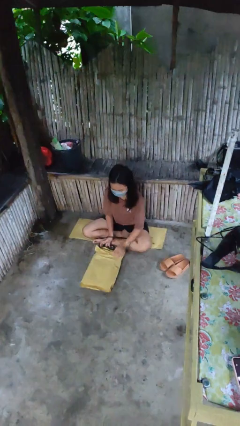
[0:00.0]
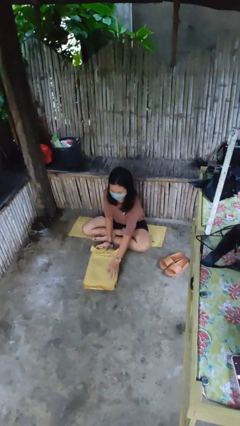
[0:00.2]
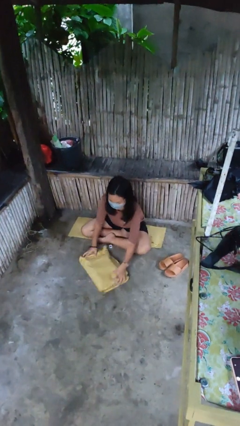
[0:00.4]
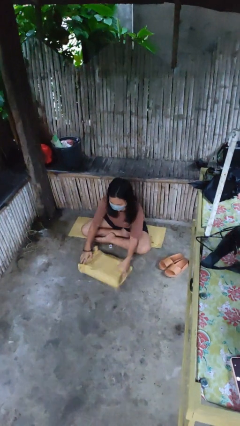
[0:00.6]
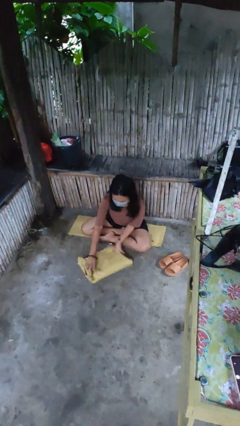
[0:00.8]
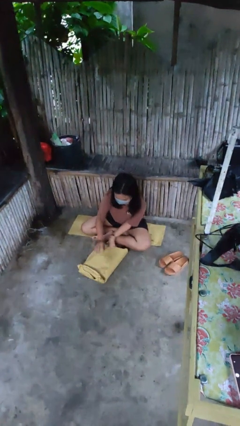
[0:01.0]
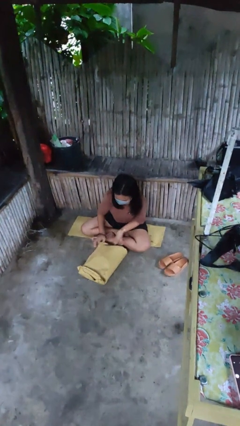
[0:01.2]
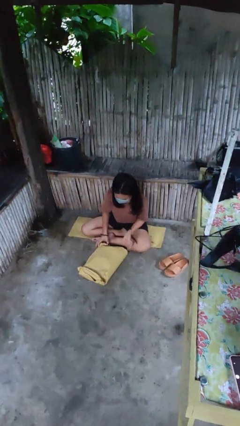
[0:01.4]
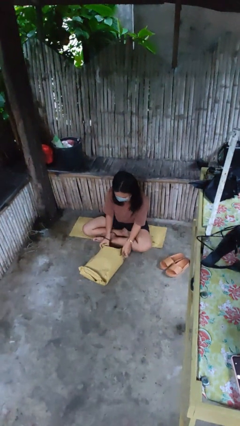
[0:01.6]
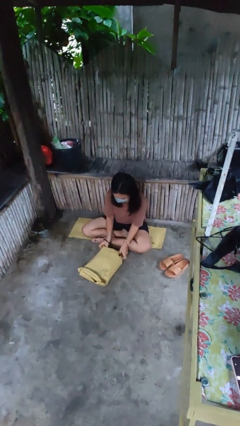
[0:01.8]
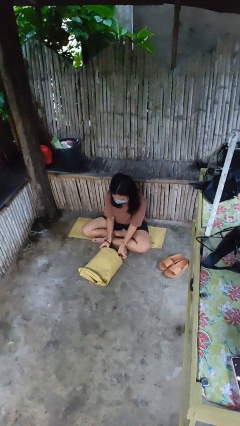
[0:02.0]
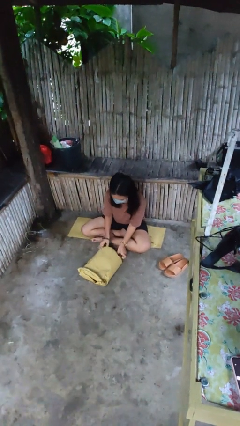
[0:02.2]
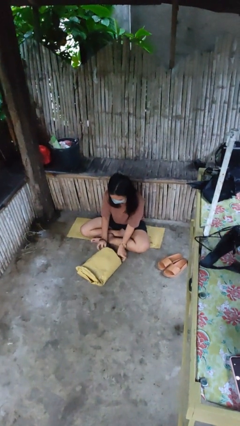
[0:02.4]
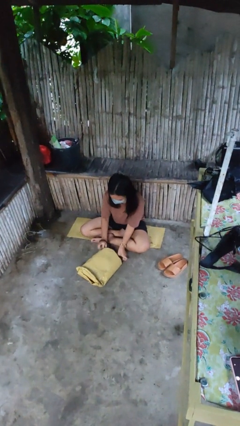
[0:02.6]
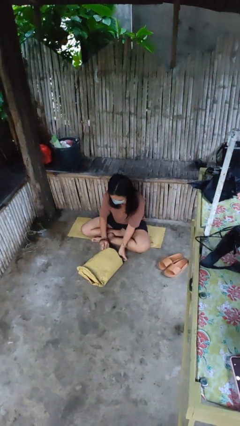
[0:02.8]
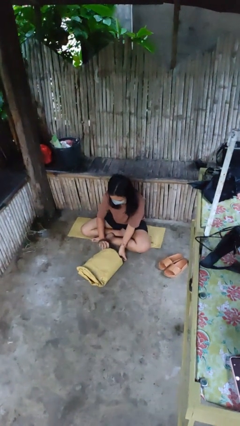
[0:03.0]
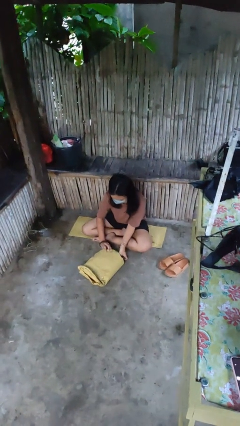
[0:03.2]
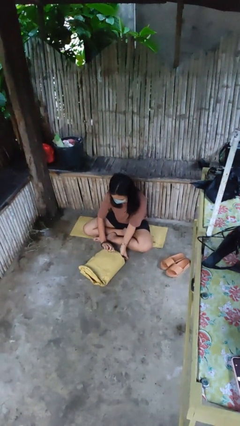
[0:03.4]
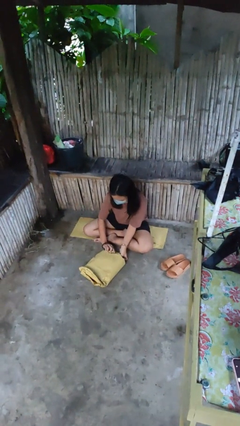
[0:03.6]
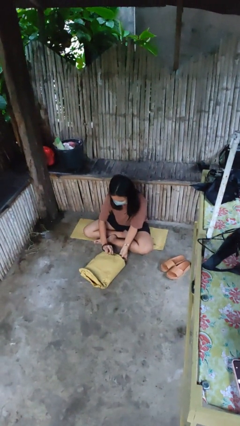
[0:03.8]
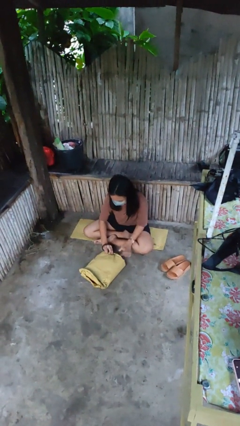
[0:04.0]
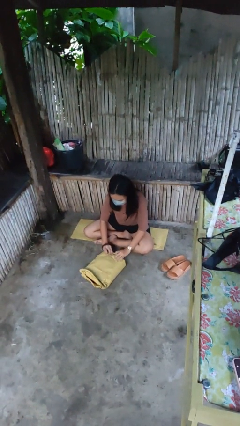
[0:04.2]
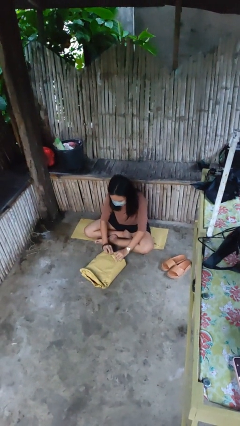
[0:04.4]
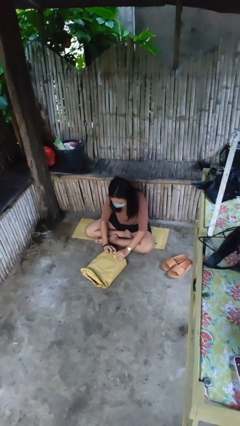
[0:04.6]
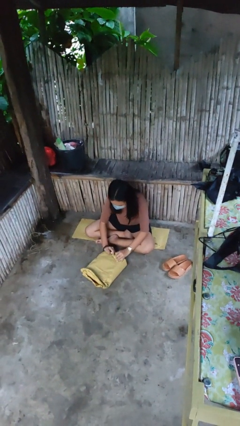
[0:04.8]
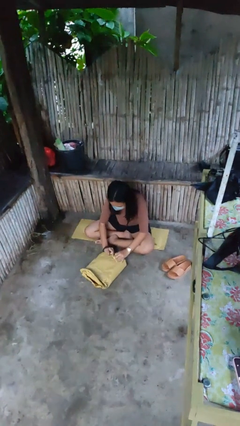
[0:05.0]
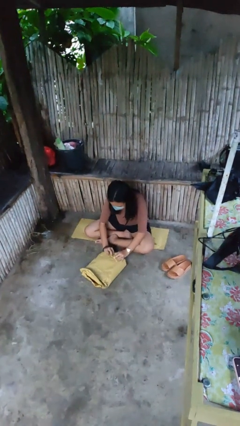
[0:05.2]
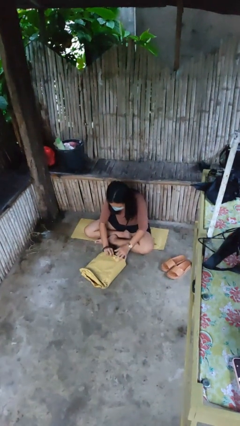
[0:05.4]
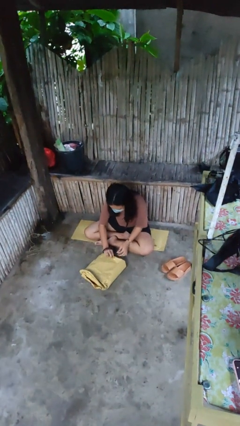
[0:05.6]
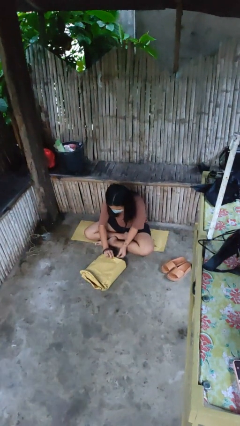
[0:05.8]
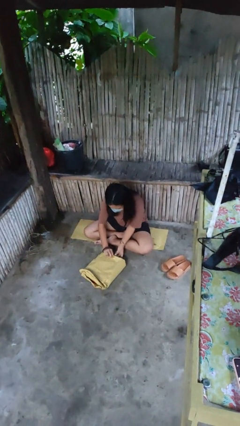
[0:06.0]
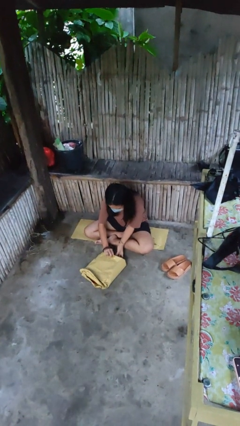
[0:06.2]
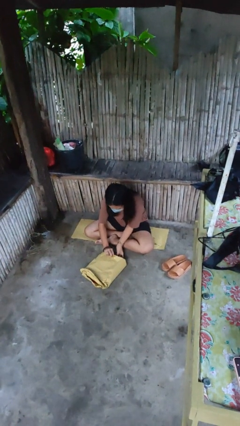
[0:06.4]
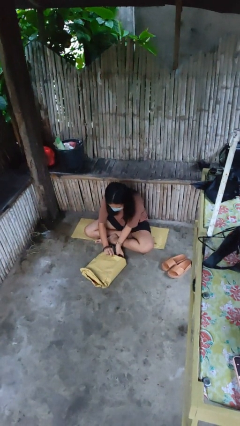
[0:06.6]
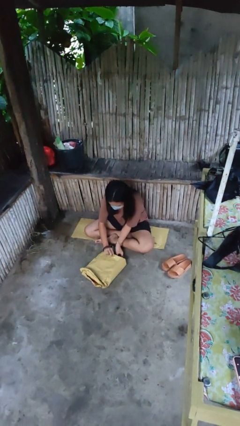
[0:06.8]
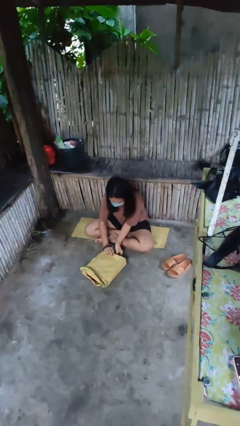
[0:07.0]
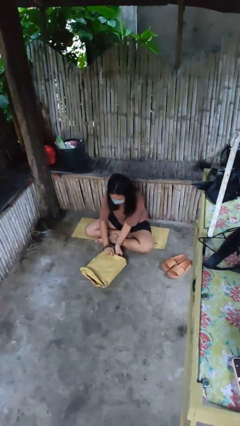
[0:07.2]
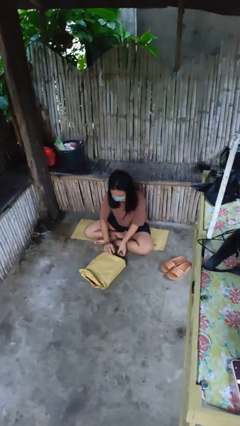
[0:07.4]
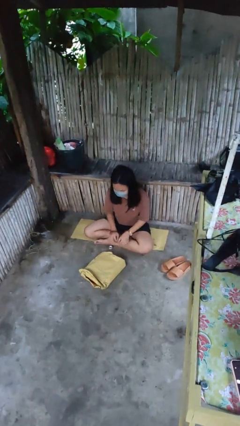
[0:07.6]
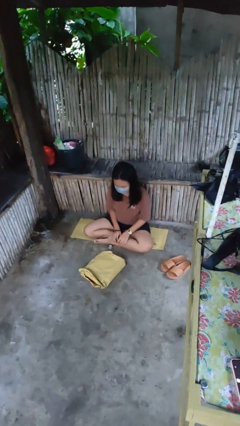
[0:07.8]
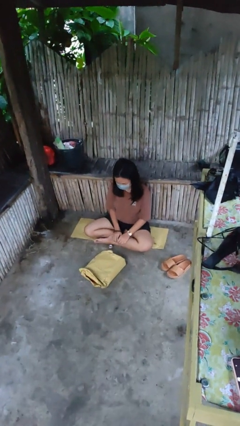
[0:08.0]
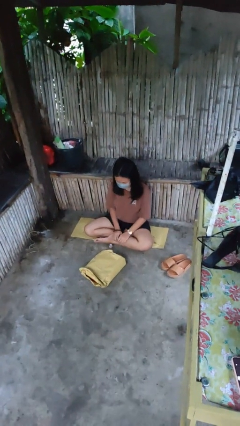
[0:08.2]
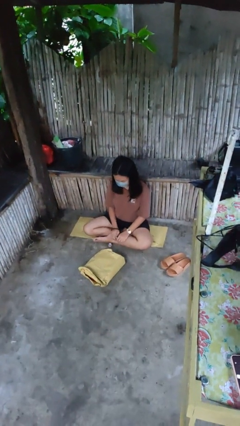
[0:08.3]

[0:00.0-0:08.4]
person wraps box

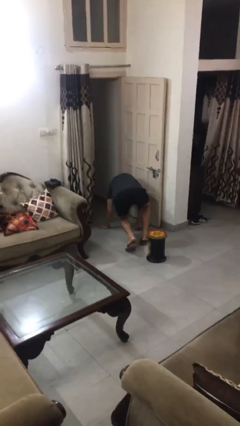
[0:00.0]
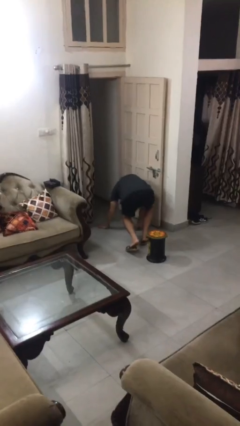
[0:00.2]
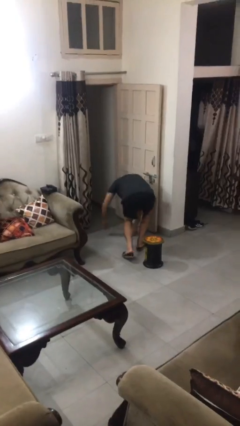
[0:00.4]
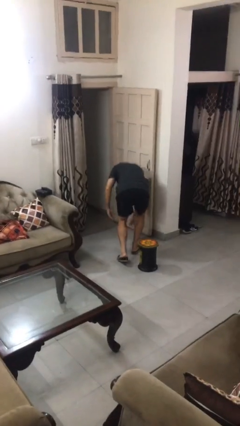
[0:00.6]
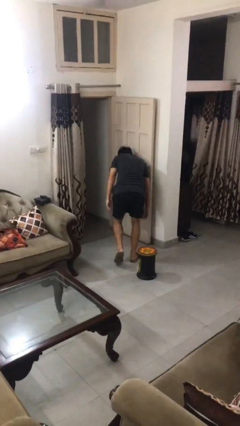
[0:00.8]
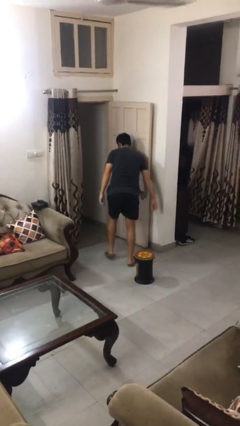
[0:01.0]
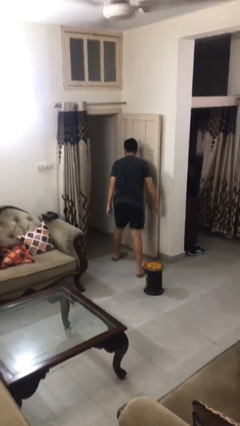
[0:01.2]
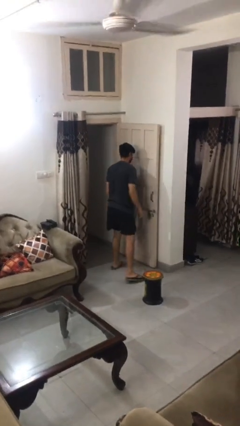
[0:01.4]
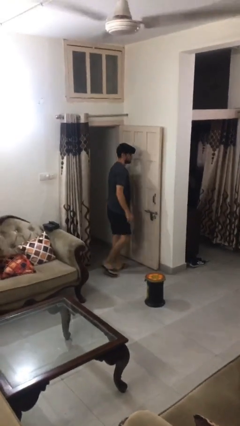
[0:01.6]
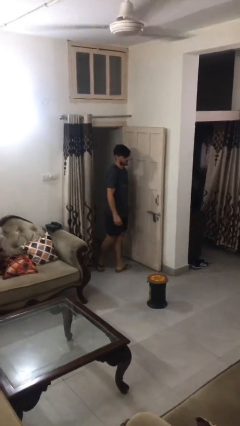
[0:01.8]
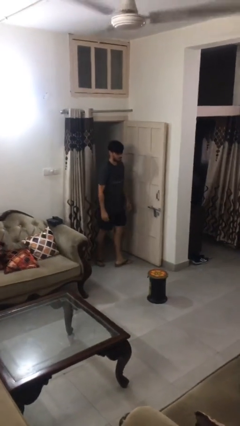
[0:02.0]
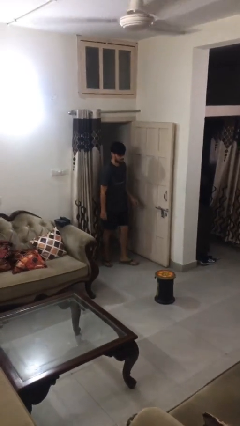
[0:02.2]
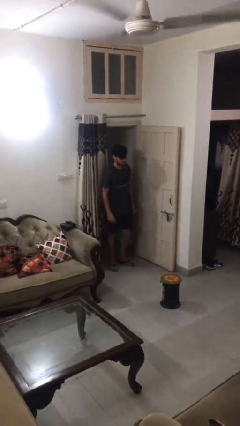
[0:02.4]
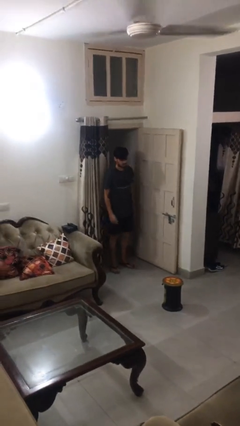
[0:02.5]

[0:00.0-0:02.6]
person stands up from floor

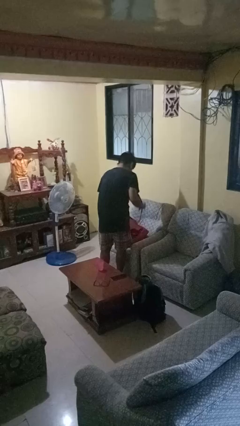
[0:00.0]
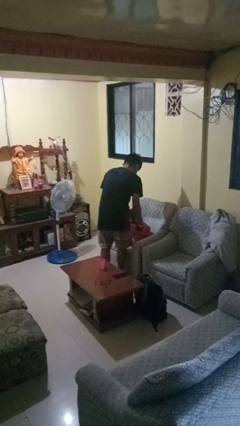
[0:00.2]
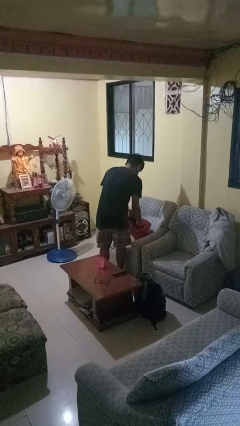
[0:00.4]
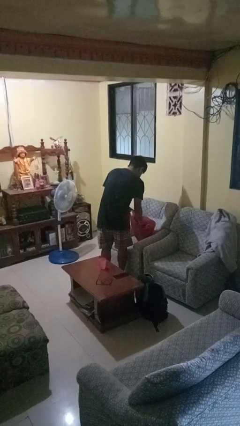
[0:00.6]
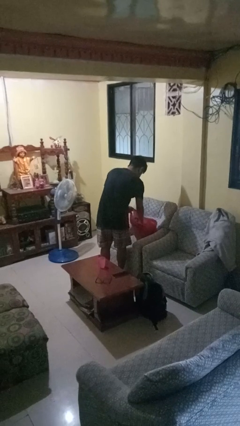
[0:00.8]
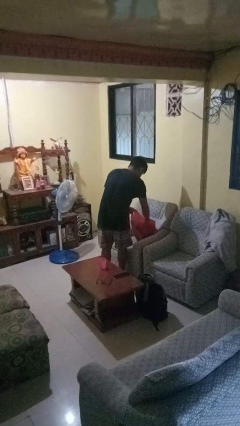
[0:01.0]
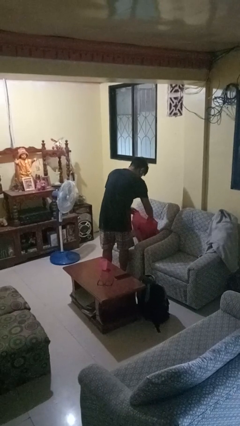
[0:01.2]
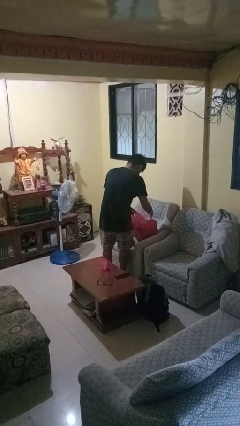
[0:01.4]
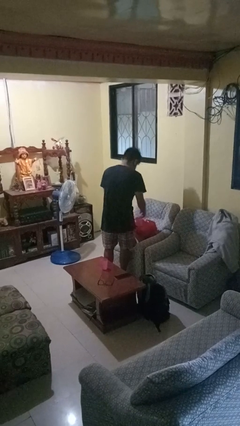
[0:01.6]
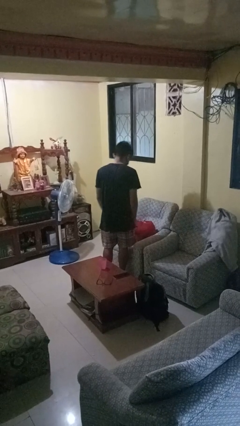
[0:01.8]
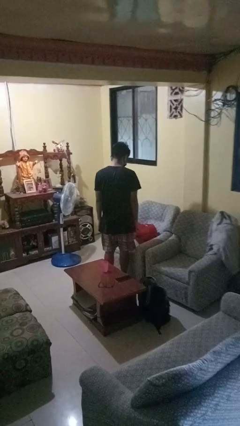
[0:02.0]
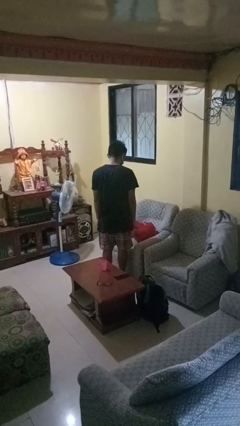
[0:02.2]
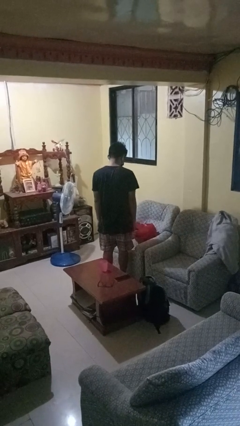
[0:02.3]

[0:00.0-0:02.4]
person puts object into bag

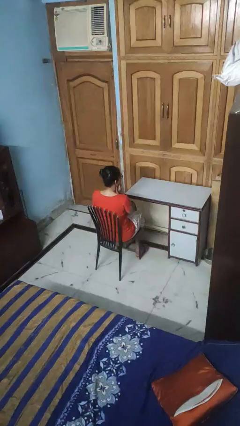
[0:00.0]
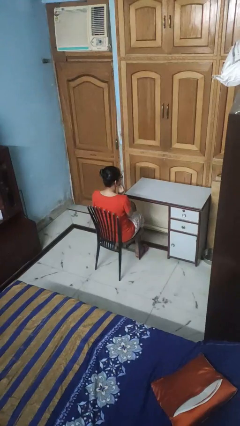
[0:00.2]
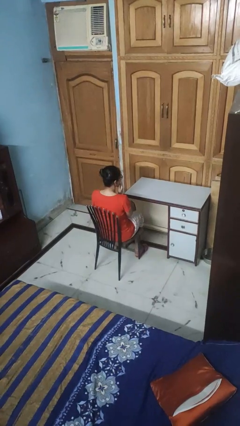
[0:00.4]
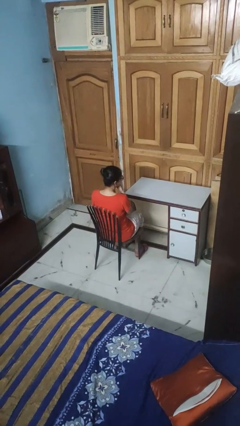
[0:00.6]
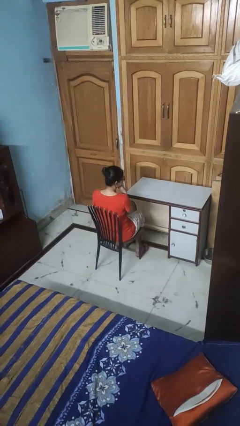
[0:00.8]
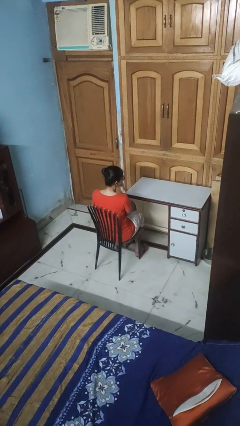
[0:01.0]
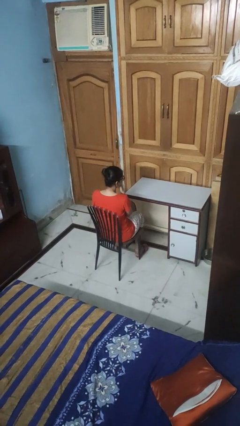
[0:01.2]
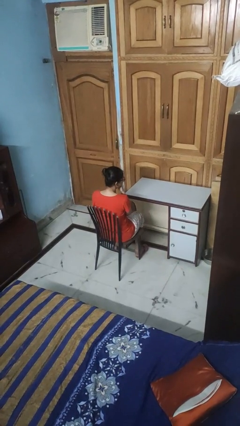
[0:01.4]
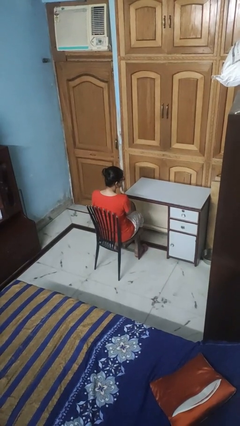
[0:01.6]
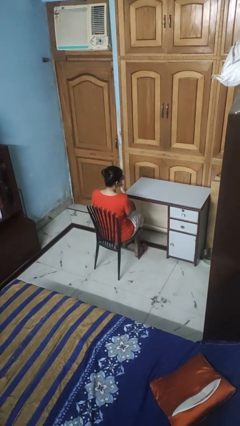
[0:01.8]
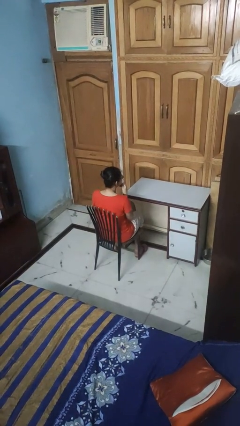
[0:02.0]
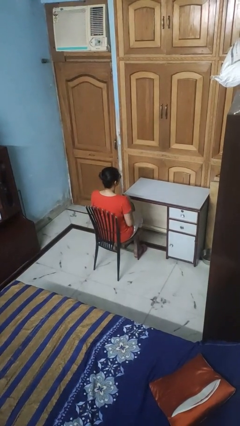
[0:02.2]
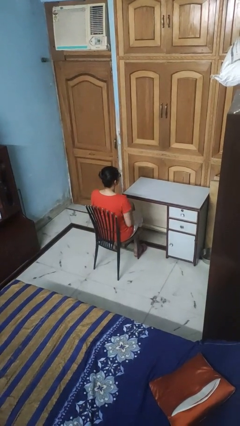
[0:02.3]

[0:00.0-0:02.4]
person strokes chin

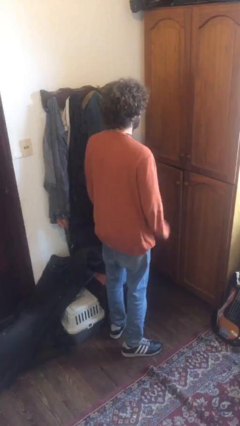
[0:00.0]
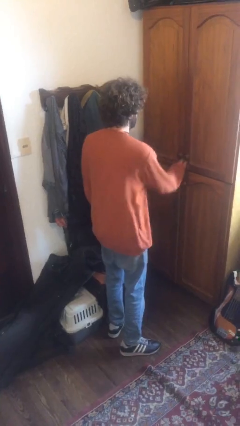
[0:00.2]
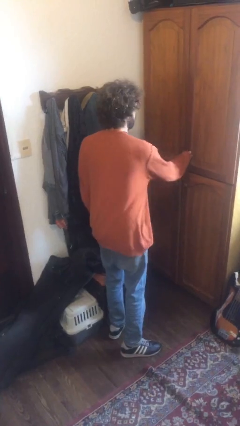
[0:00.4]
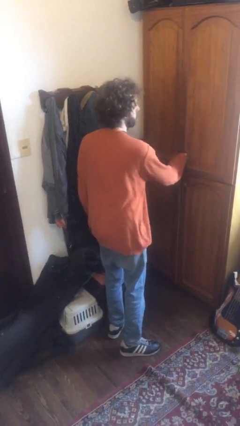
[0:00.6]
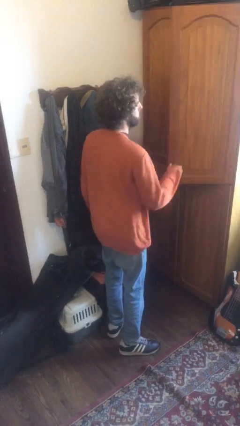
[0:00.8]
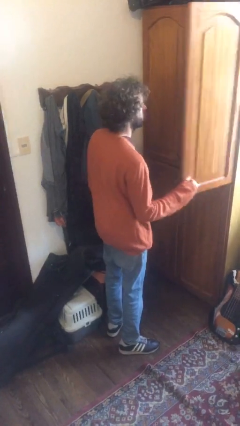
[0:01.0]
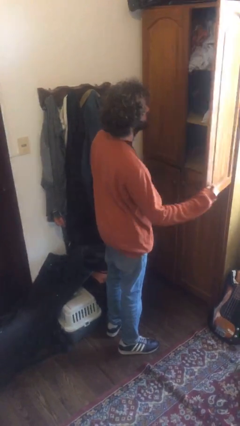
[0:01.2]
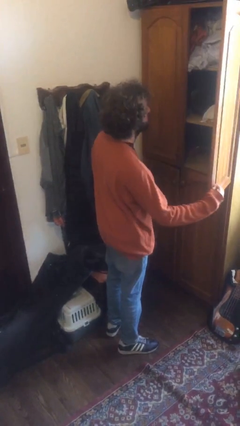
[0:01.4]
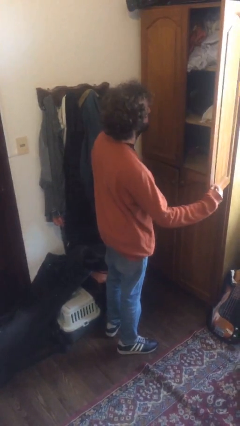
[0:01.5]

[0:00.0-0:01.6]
person opens dresser drawer

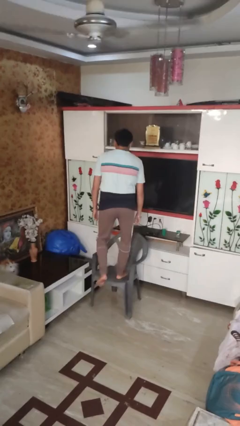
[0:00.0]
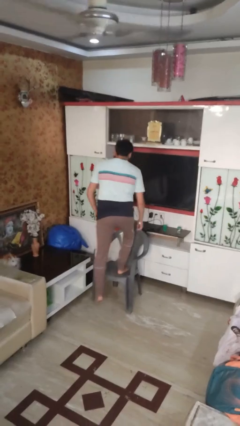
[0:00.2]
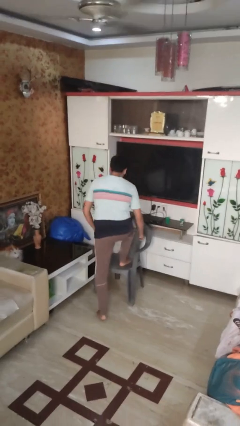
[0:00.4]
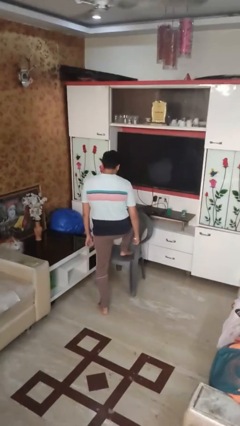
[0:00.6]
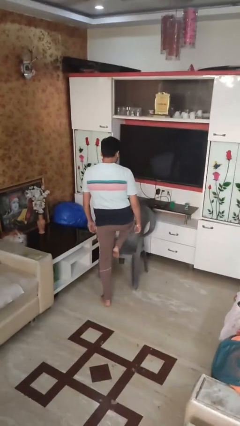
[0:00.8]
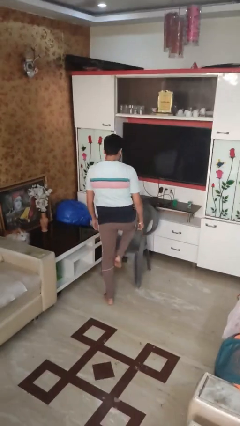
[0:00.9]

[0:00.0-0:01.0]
person climbs off chair
